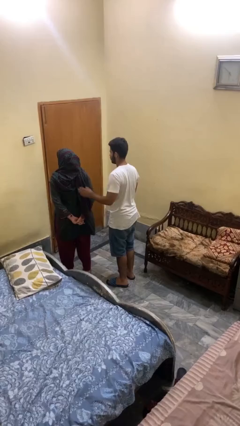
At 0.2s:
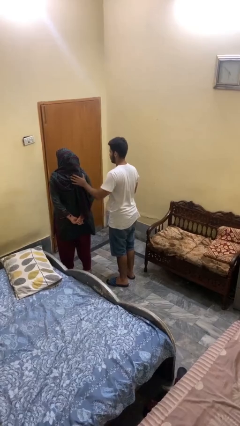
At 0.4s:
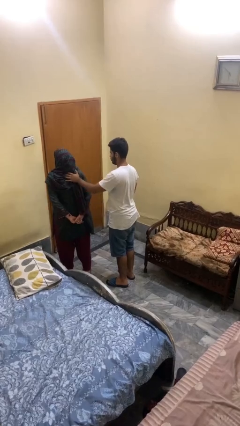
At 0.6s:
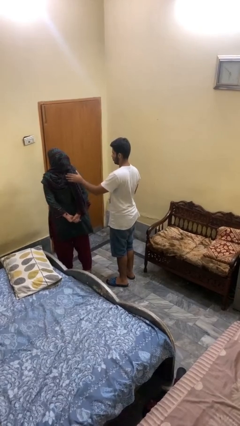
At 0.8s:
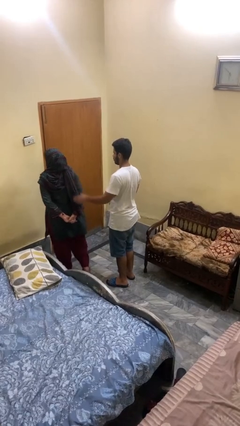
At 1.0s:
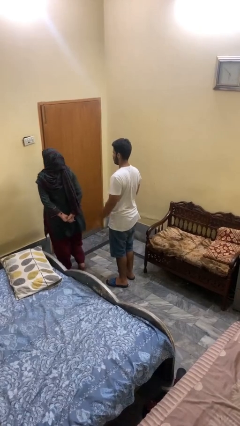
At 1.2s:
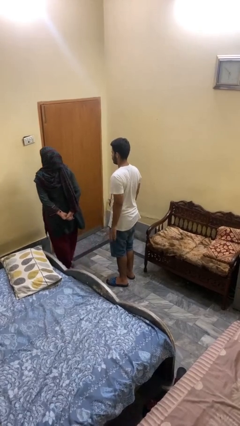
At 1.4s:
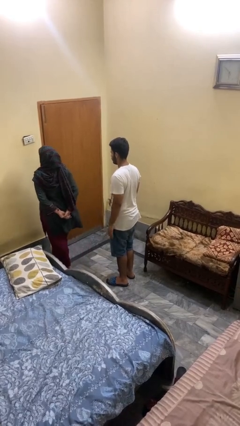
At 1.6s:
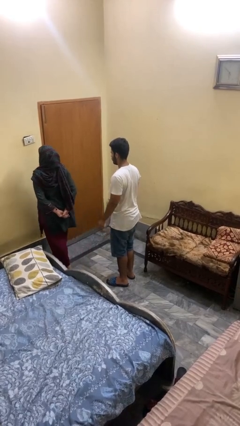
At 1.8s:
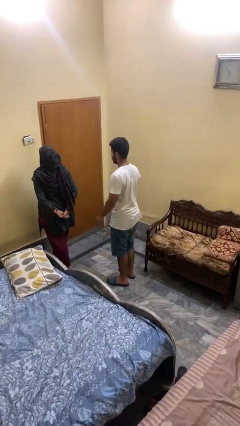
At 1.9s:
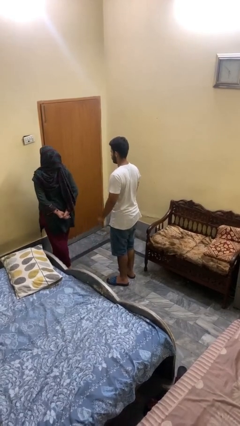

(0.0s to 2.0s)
person shoves person

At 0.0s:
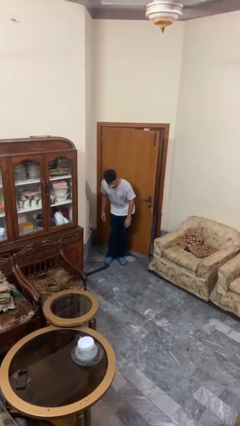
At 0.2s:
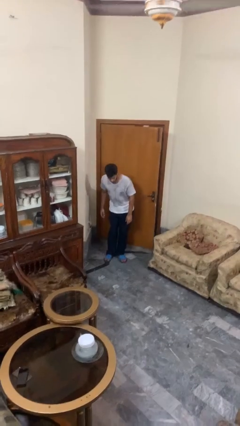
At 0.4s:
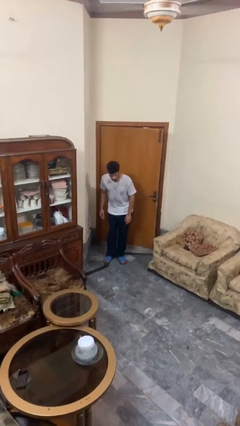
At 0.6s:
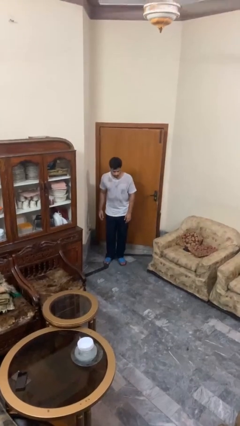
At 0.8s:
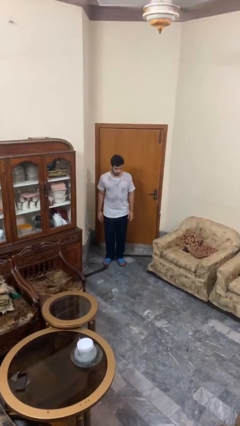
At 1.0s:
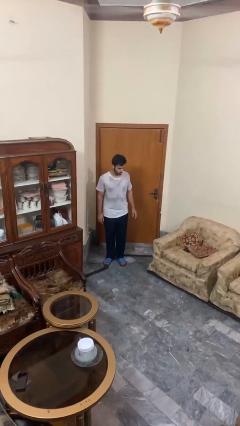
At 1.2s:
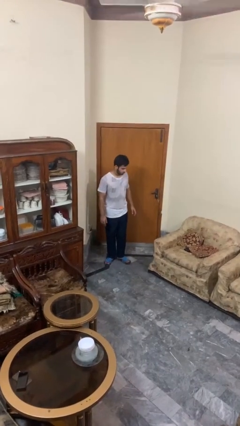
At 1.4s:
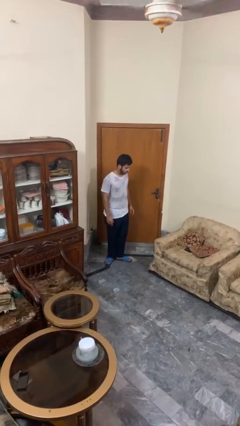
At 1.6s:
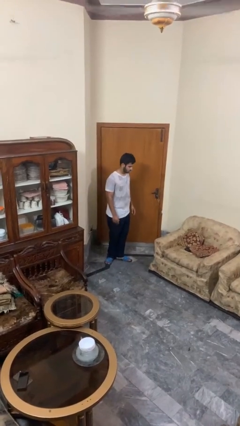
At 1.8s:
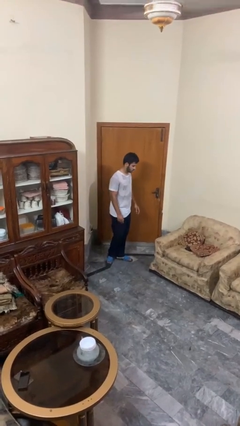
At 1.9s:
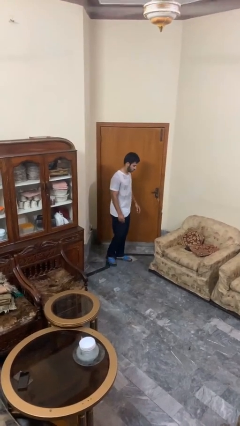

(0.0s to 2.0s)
person closes door with hip

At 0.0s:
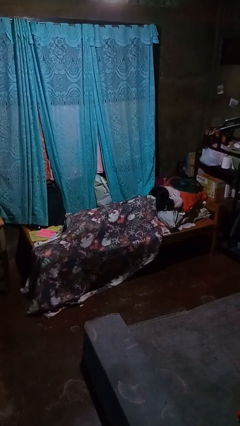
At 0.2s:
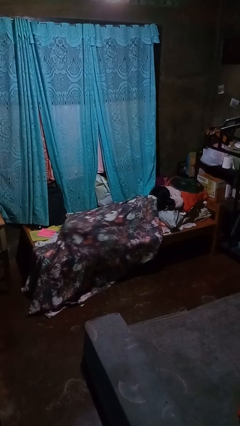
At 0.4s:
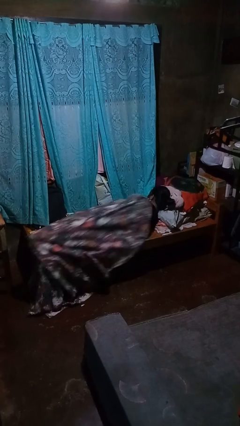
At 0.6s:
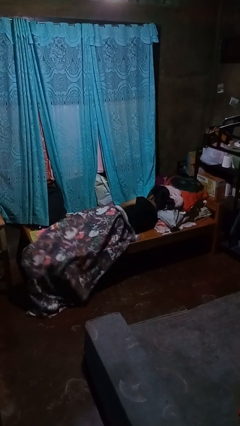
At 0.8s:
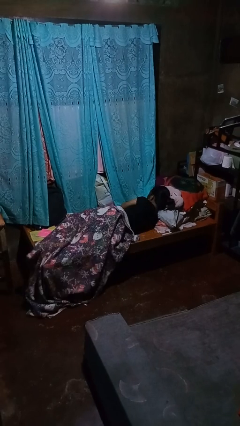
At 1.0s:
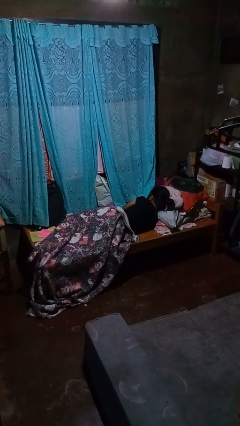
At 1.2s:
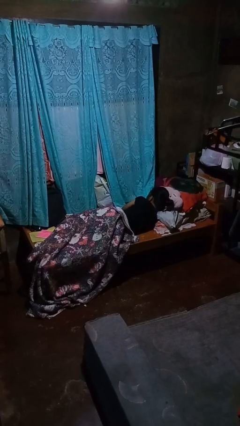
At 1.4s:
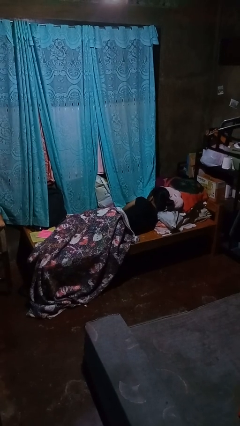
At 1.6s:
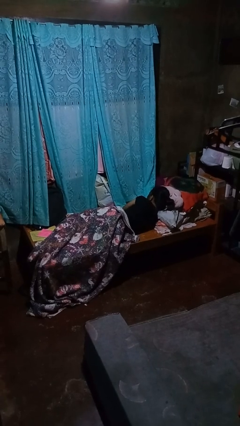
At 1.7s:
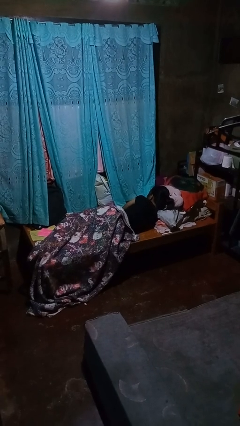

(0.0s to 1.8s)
person uncovers with bedsheets

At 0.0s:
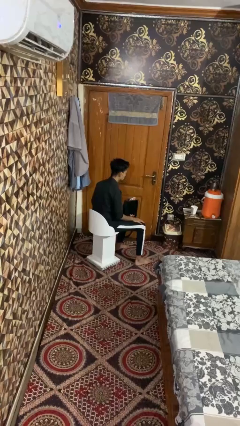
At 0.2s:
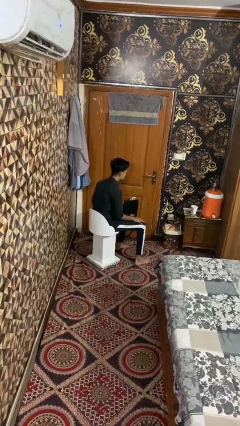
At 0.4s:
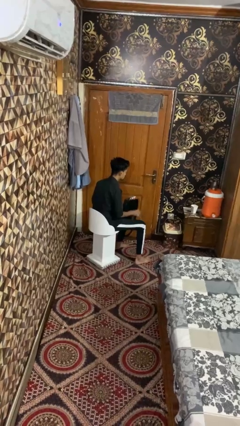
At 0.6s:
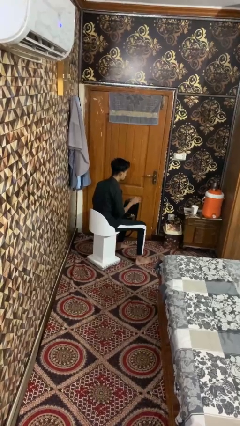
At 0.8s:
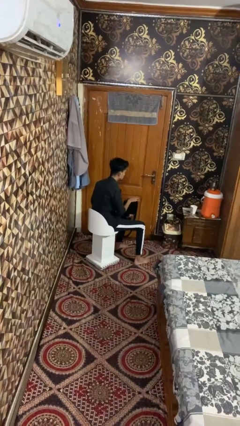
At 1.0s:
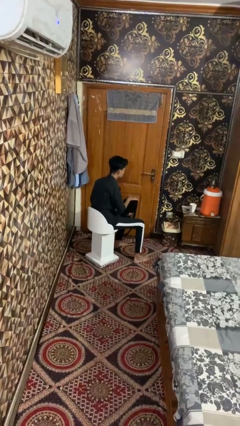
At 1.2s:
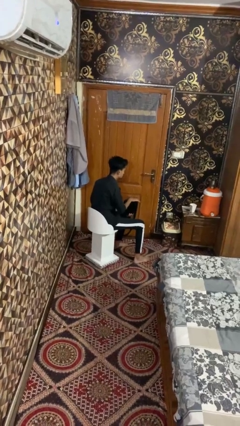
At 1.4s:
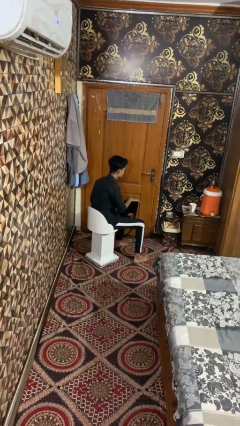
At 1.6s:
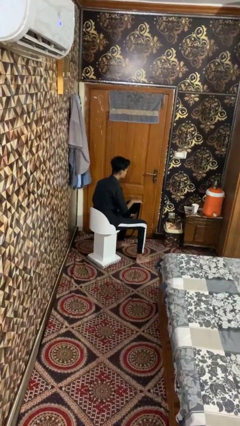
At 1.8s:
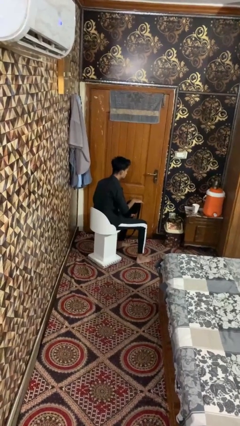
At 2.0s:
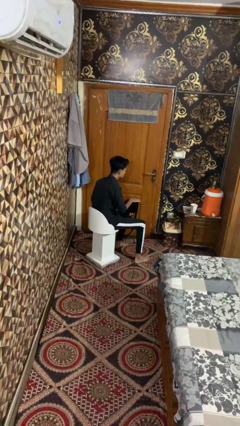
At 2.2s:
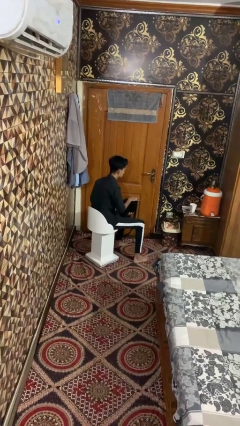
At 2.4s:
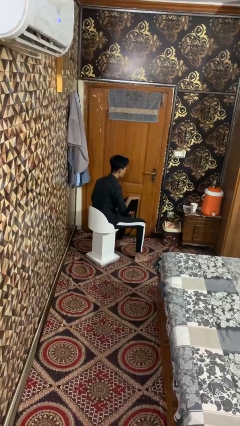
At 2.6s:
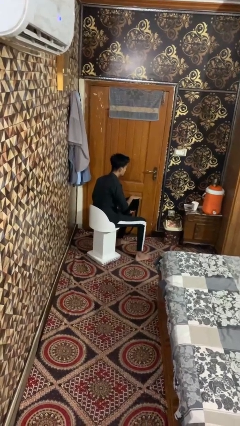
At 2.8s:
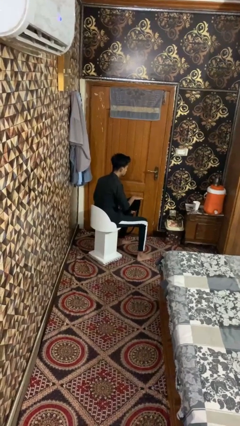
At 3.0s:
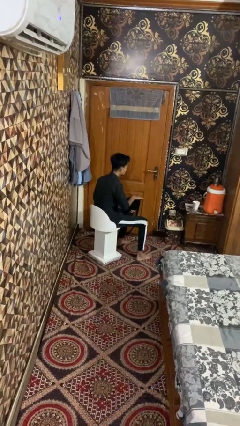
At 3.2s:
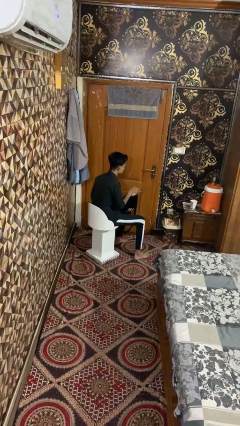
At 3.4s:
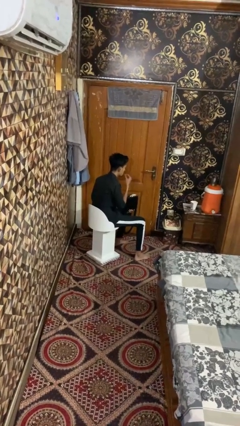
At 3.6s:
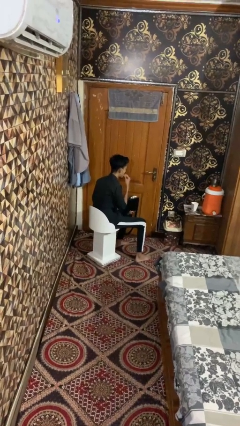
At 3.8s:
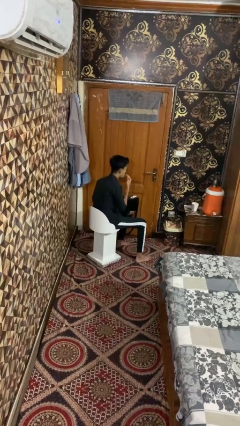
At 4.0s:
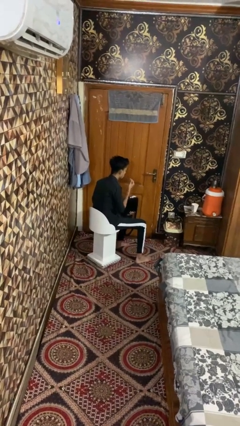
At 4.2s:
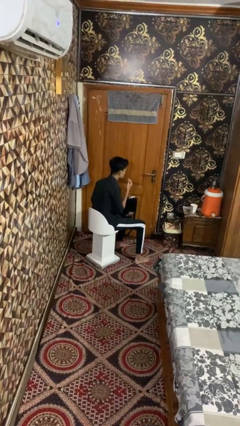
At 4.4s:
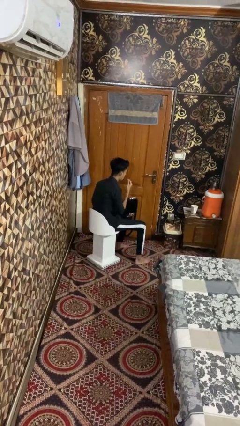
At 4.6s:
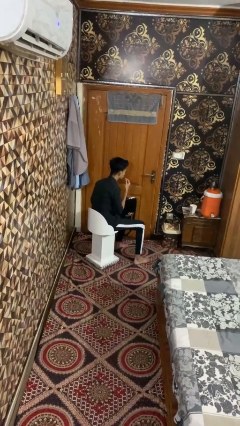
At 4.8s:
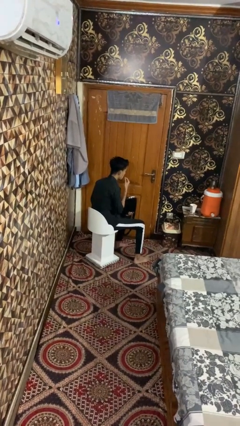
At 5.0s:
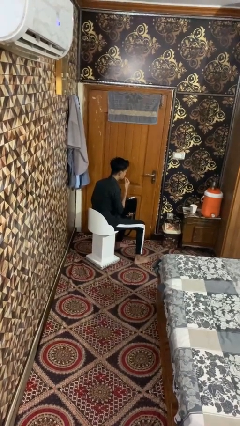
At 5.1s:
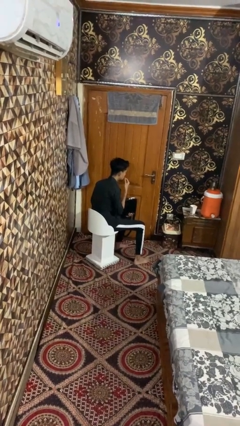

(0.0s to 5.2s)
person eats snack from bag

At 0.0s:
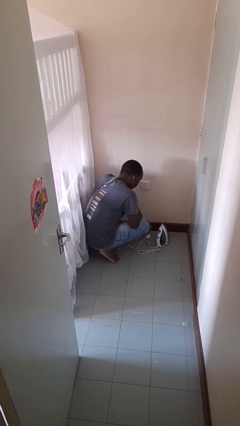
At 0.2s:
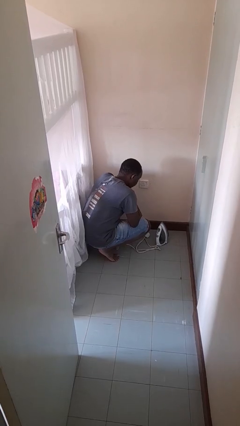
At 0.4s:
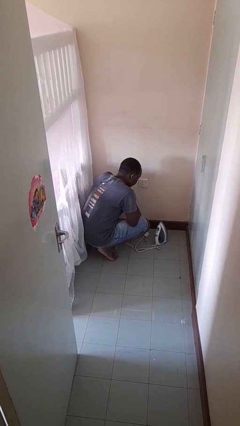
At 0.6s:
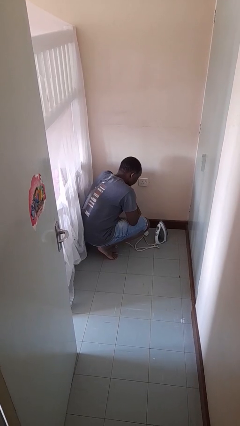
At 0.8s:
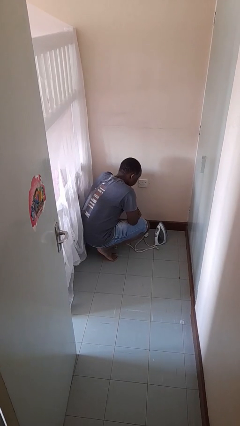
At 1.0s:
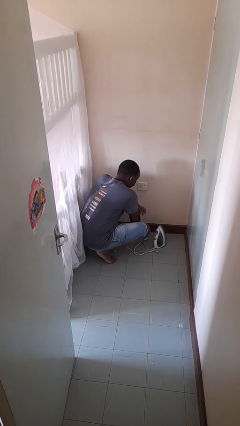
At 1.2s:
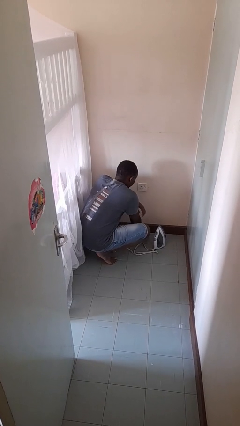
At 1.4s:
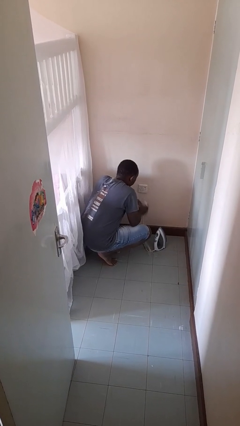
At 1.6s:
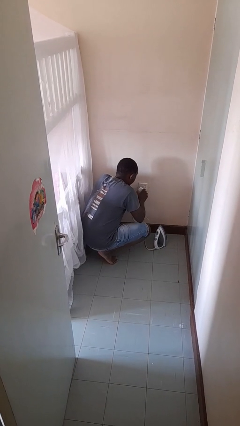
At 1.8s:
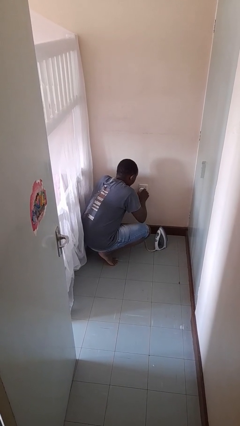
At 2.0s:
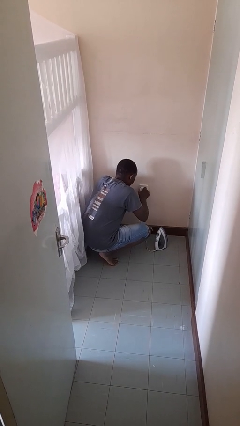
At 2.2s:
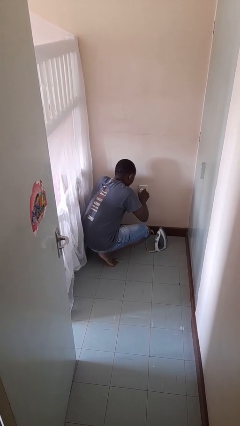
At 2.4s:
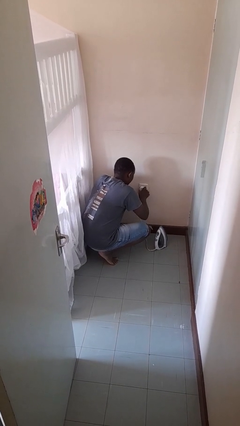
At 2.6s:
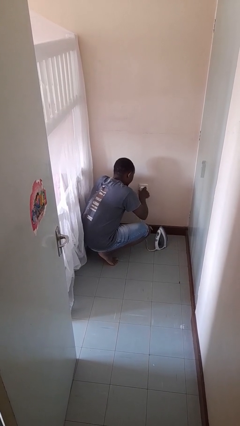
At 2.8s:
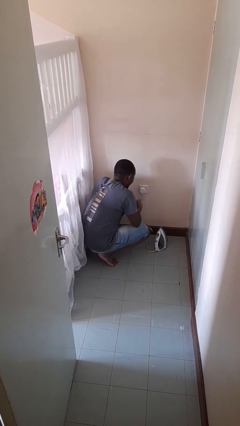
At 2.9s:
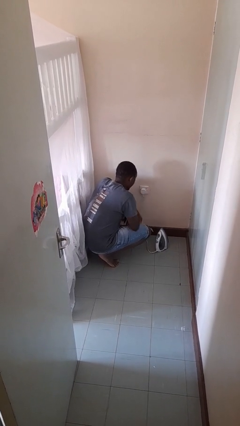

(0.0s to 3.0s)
person plugs into electrical socket

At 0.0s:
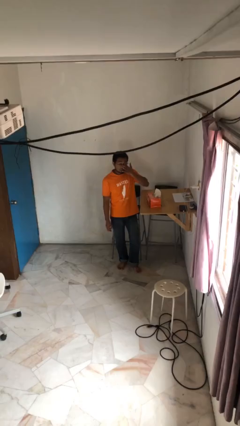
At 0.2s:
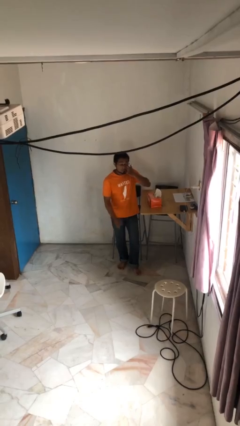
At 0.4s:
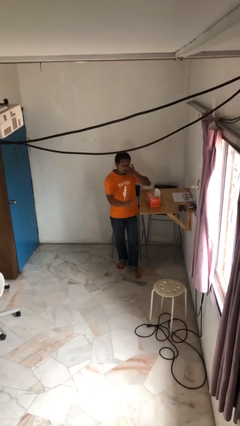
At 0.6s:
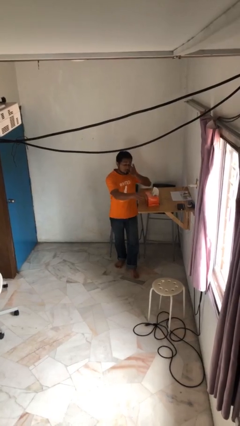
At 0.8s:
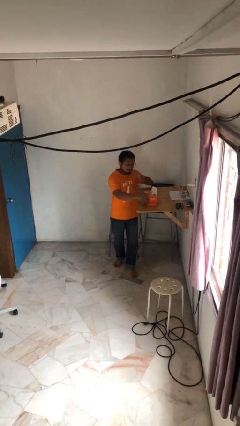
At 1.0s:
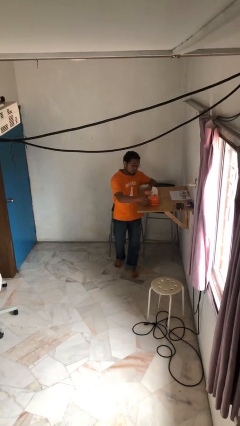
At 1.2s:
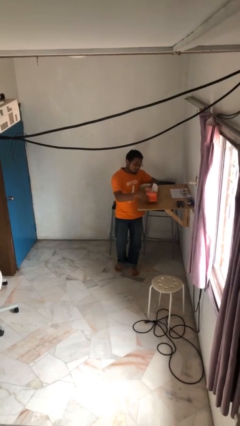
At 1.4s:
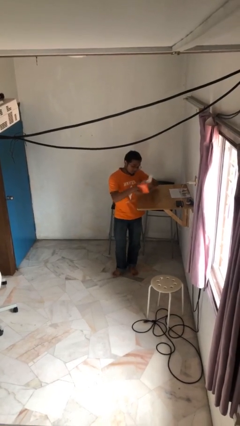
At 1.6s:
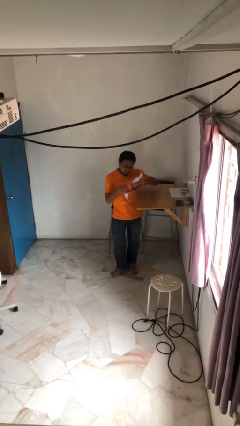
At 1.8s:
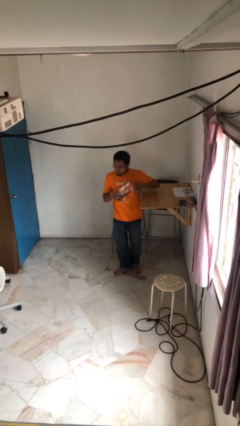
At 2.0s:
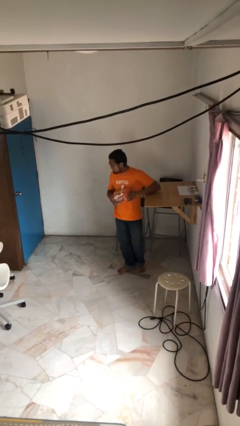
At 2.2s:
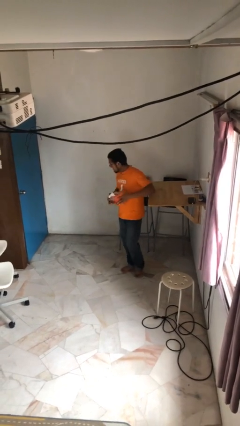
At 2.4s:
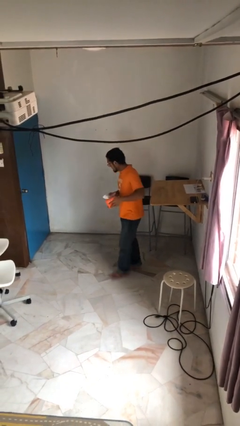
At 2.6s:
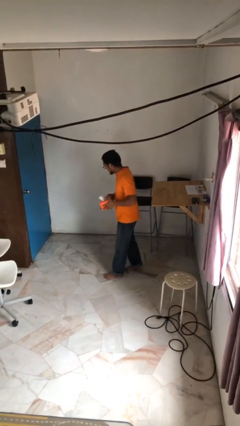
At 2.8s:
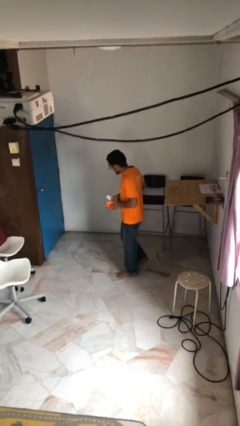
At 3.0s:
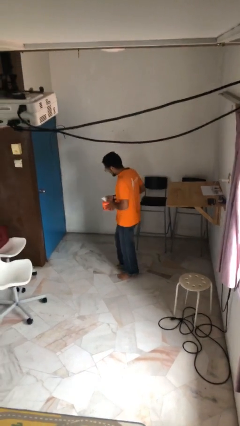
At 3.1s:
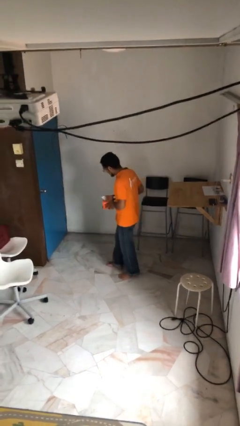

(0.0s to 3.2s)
person picks up object from table

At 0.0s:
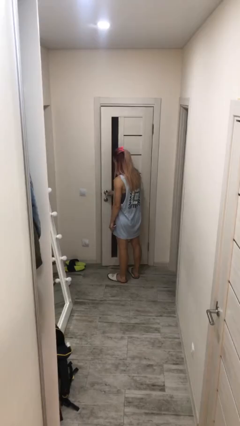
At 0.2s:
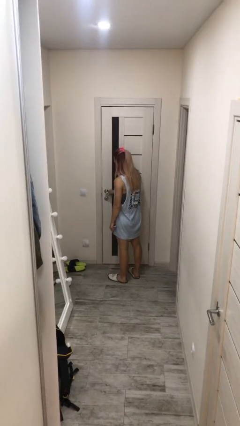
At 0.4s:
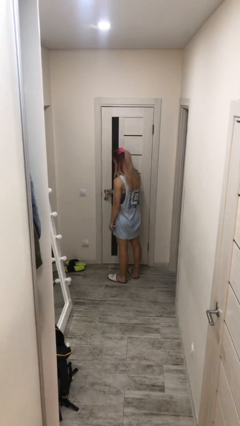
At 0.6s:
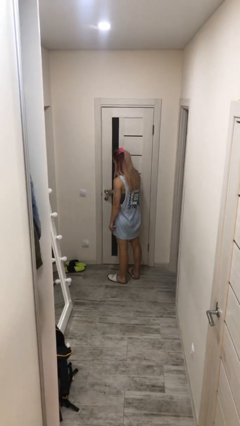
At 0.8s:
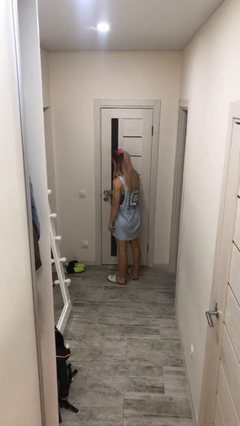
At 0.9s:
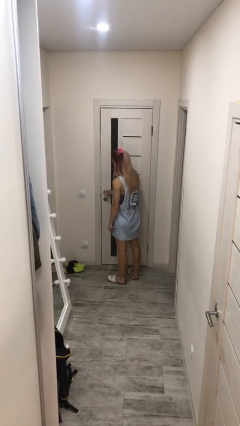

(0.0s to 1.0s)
person closes facility door
